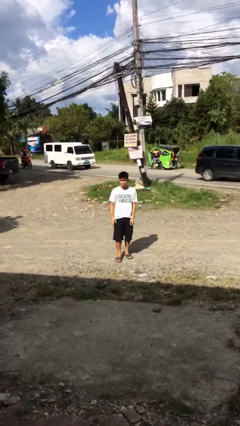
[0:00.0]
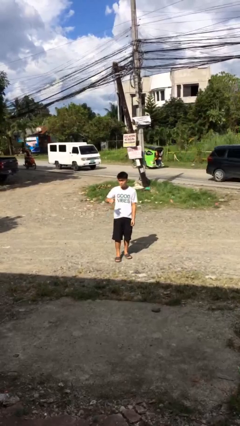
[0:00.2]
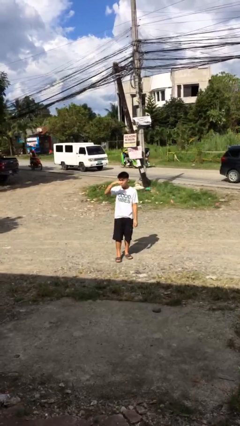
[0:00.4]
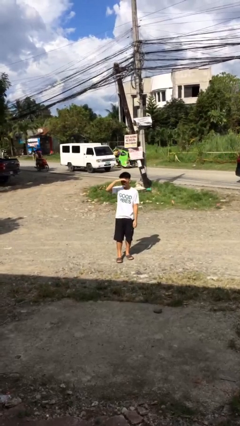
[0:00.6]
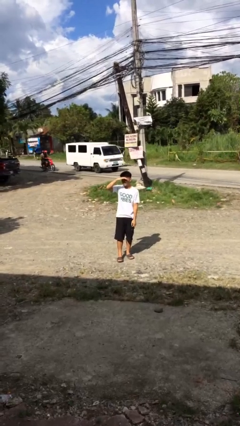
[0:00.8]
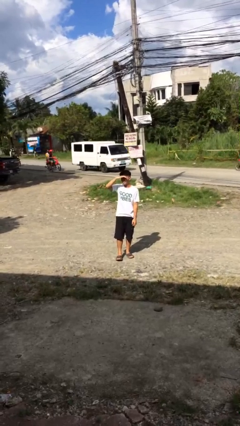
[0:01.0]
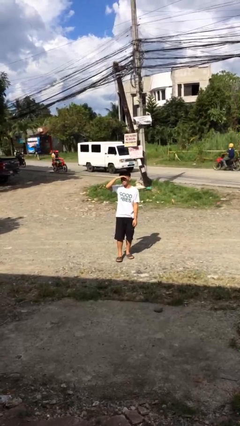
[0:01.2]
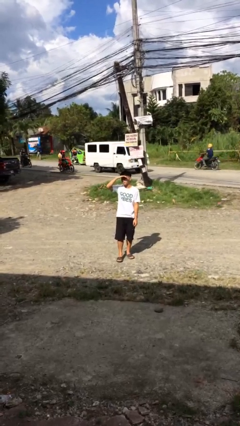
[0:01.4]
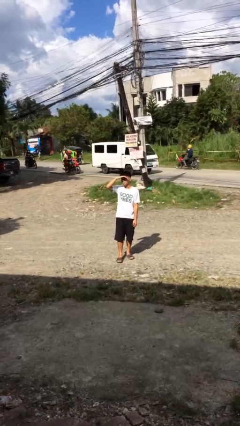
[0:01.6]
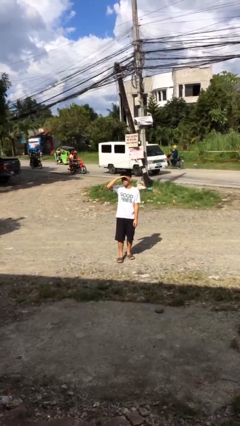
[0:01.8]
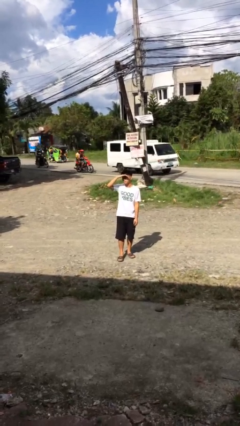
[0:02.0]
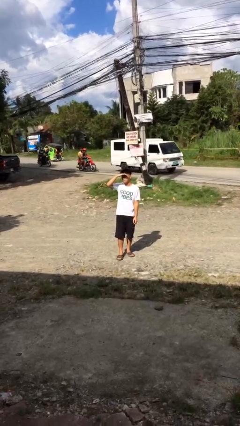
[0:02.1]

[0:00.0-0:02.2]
person shades eyes

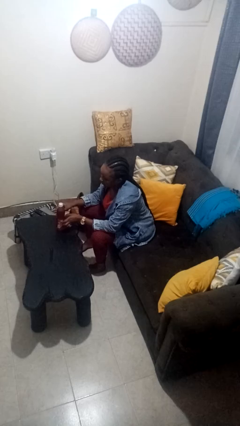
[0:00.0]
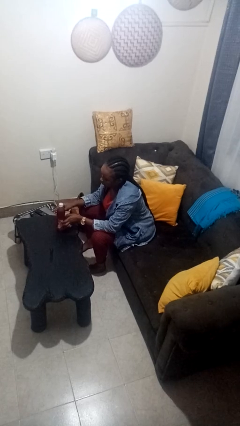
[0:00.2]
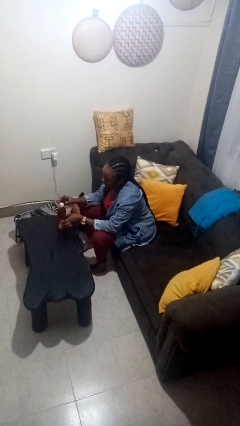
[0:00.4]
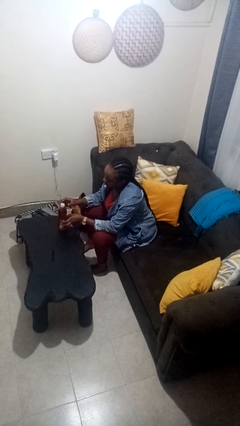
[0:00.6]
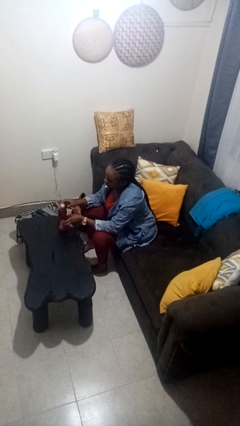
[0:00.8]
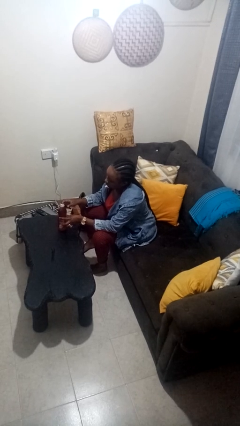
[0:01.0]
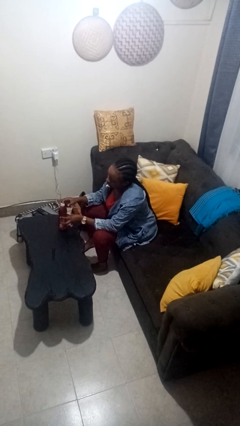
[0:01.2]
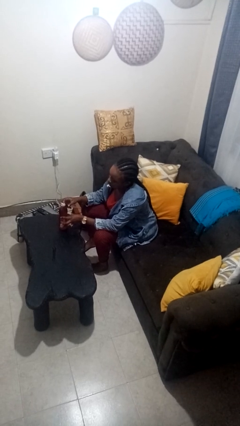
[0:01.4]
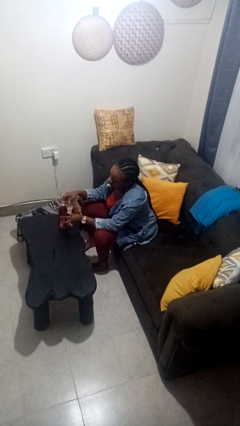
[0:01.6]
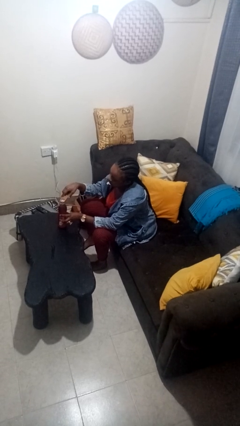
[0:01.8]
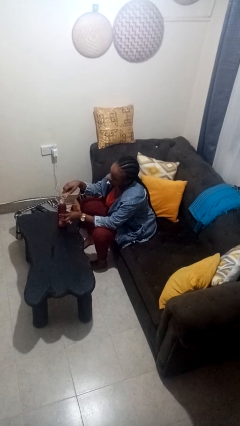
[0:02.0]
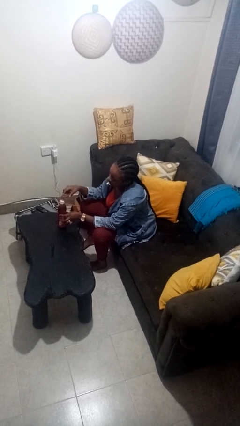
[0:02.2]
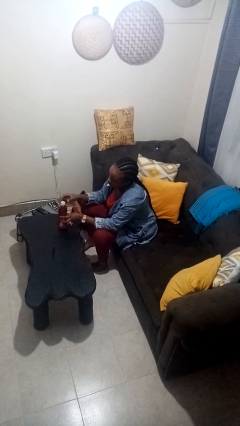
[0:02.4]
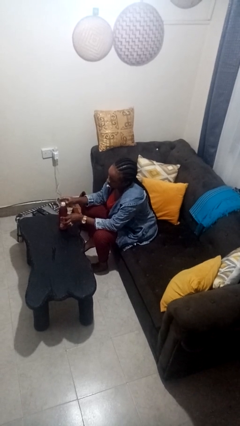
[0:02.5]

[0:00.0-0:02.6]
person opens can with can opener

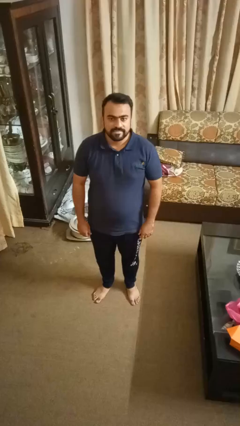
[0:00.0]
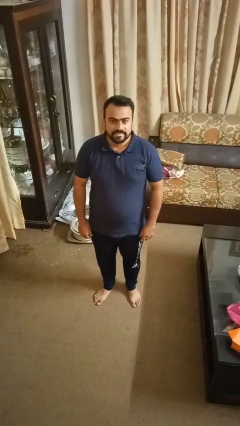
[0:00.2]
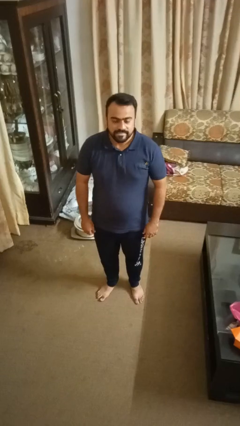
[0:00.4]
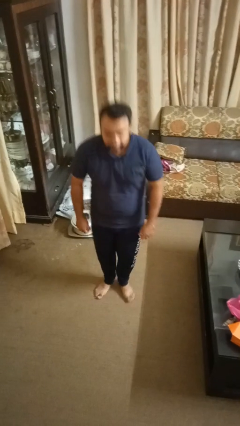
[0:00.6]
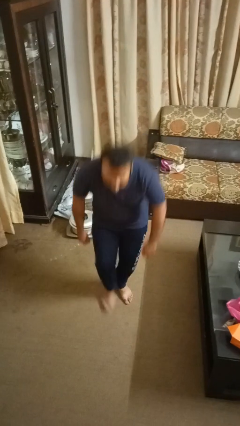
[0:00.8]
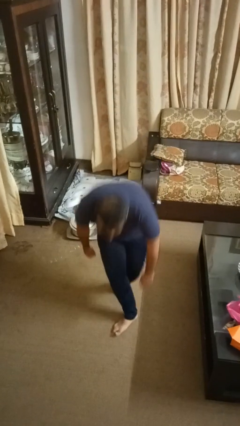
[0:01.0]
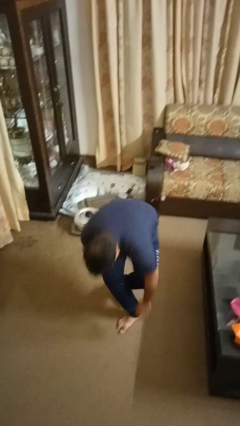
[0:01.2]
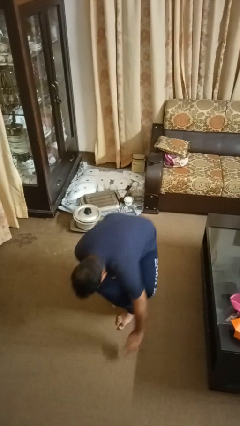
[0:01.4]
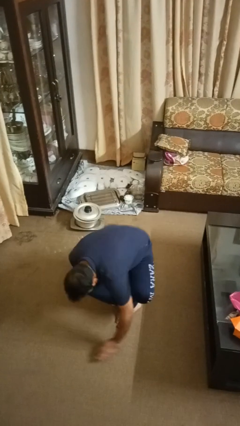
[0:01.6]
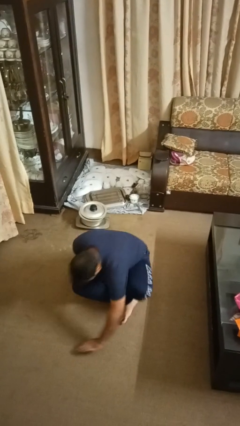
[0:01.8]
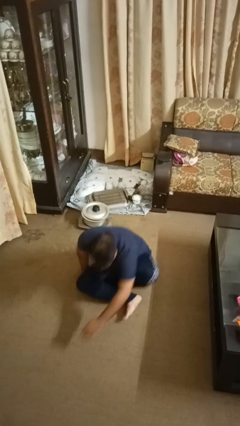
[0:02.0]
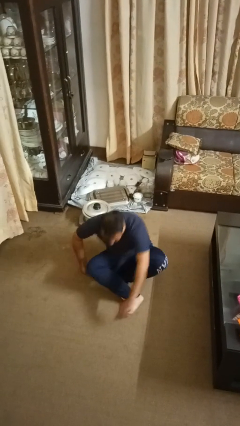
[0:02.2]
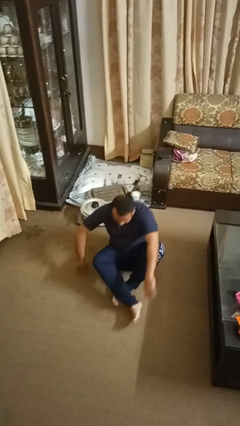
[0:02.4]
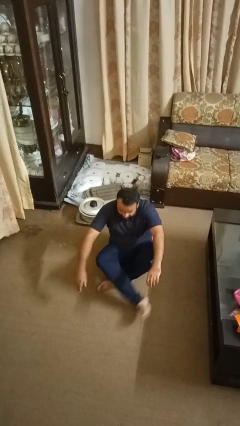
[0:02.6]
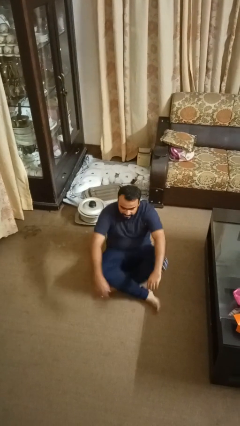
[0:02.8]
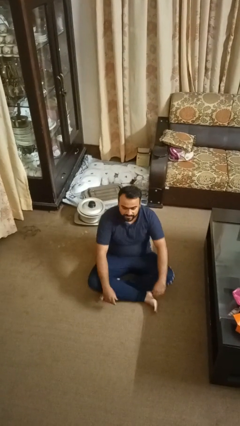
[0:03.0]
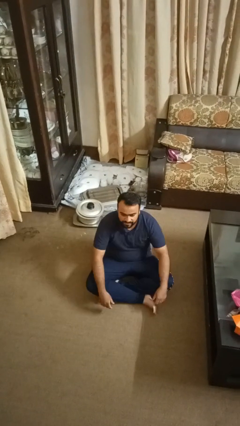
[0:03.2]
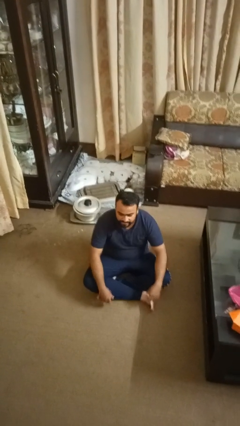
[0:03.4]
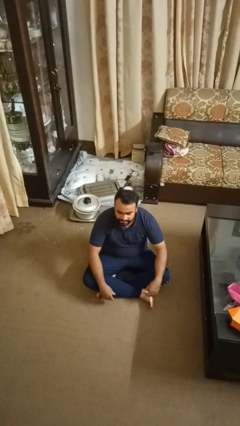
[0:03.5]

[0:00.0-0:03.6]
person sits crisscross

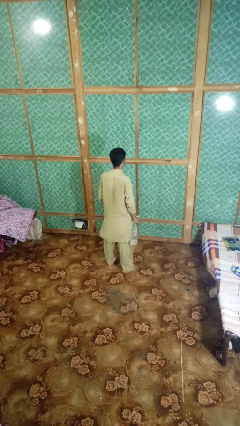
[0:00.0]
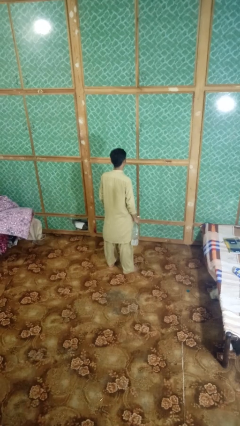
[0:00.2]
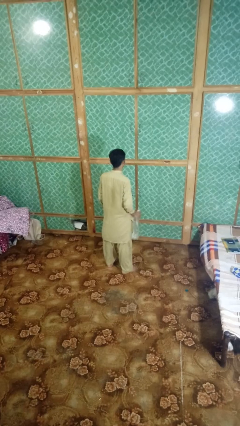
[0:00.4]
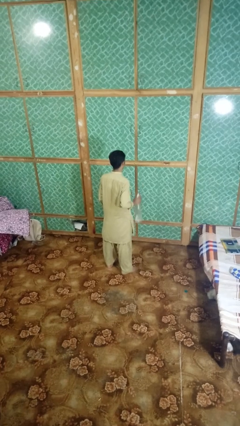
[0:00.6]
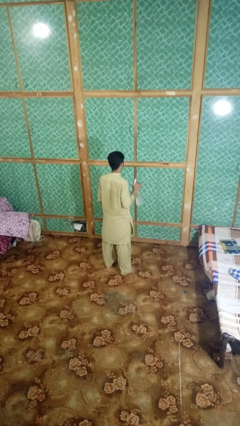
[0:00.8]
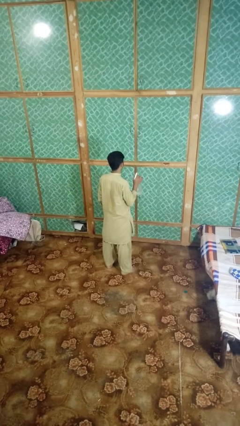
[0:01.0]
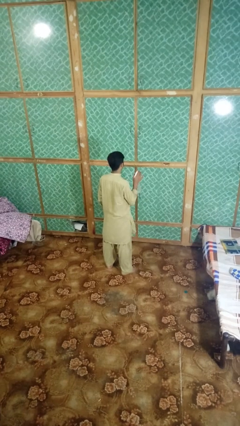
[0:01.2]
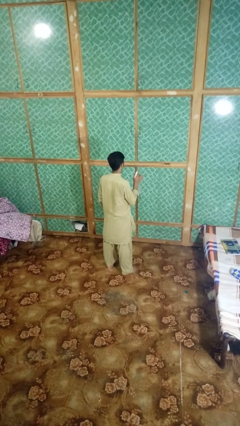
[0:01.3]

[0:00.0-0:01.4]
person sprays from bottle

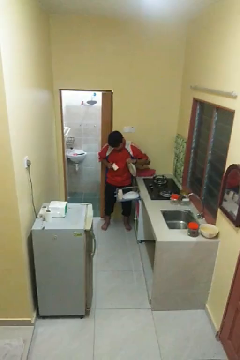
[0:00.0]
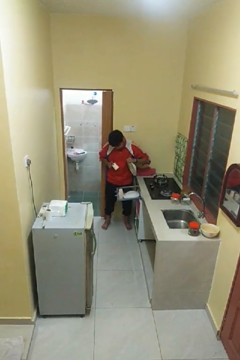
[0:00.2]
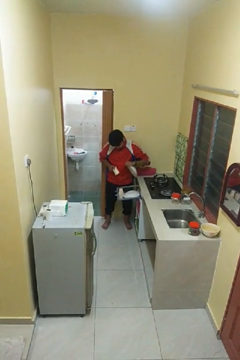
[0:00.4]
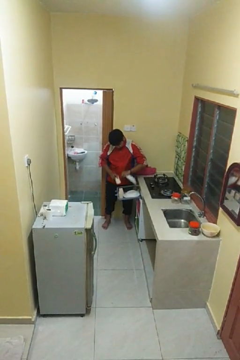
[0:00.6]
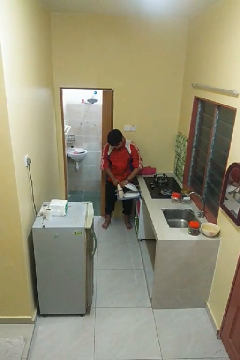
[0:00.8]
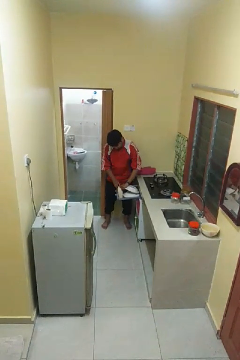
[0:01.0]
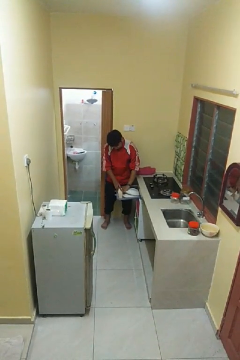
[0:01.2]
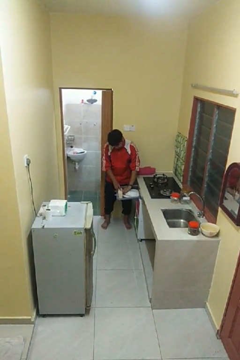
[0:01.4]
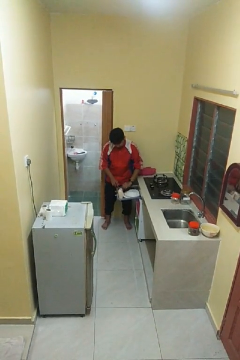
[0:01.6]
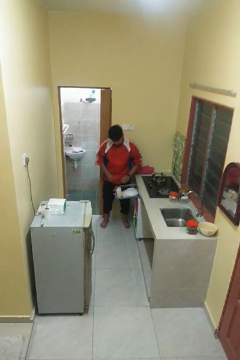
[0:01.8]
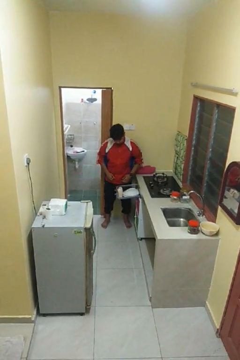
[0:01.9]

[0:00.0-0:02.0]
person puts object into kitchen drawer

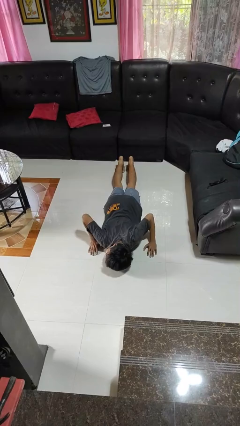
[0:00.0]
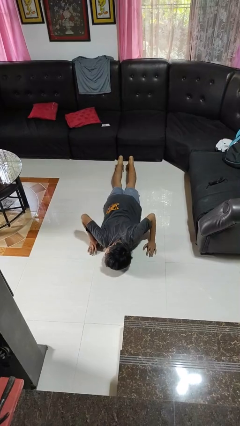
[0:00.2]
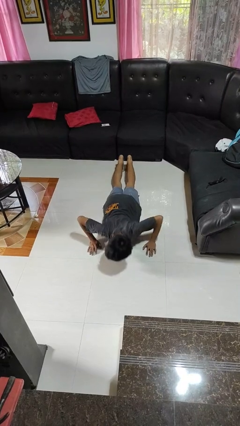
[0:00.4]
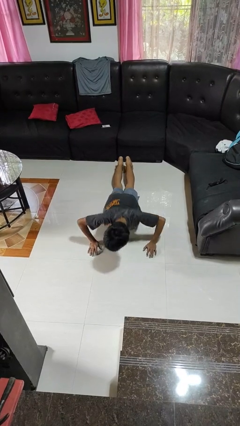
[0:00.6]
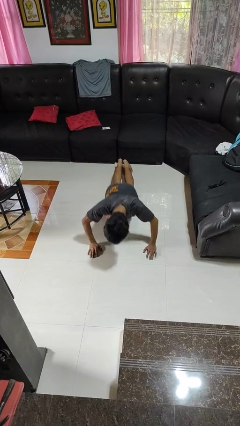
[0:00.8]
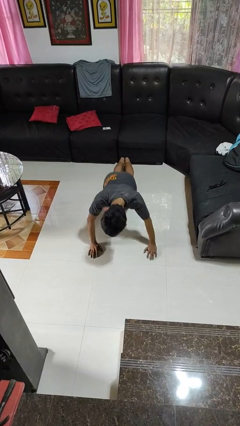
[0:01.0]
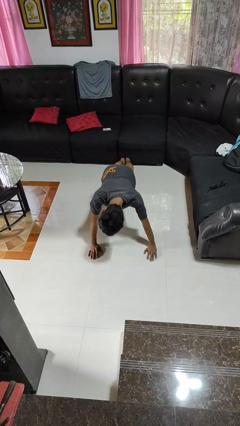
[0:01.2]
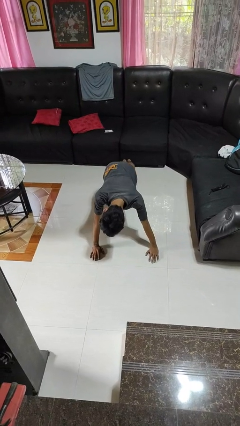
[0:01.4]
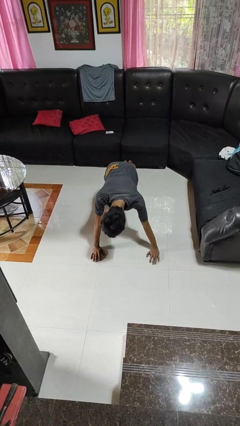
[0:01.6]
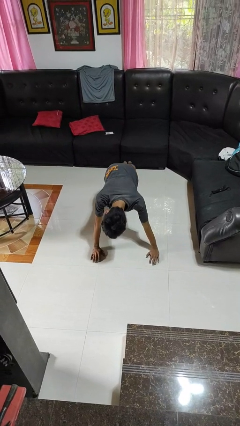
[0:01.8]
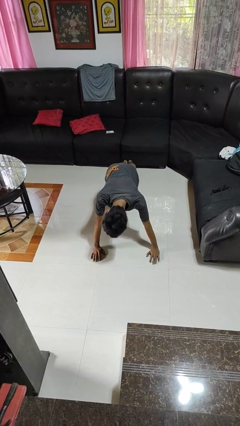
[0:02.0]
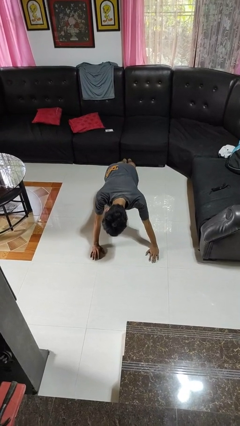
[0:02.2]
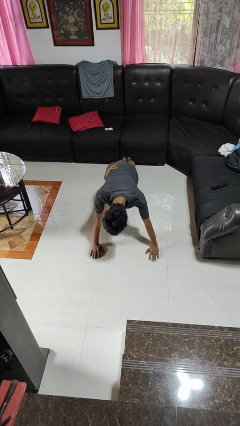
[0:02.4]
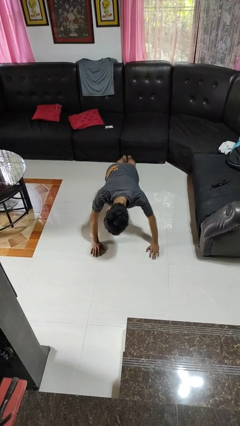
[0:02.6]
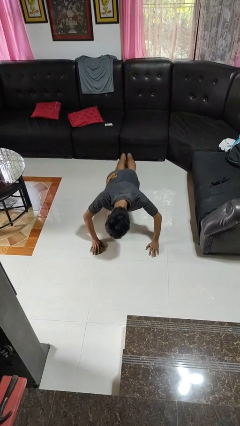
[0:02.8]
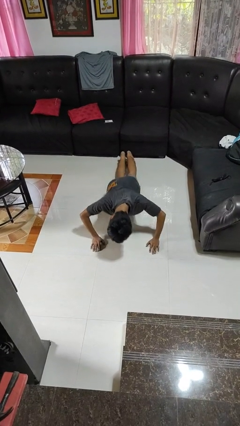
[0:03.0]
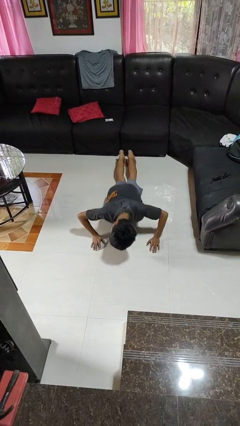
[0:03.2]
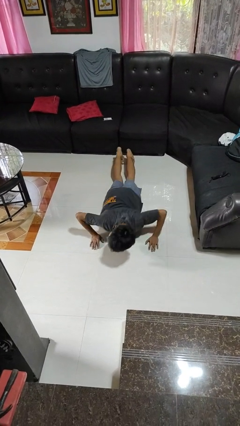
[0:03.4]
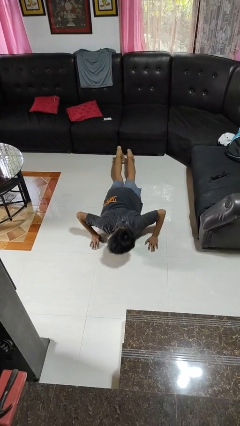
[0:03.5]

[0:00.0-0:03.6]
person exercises with pushup

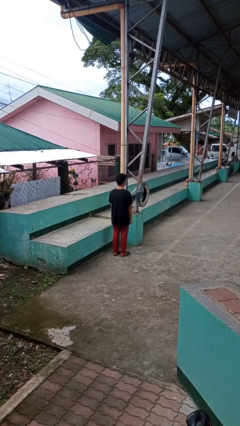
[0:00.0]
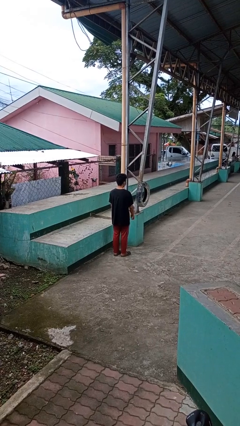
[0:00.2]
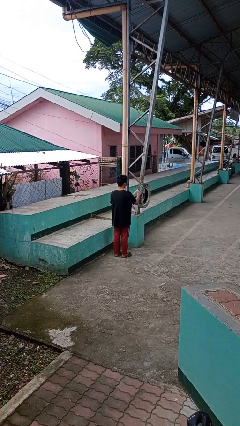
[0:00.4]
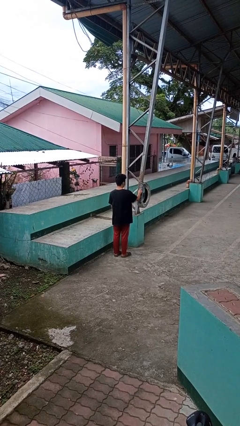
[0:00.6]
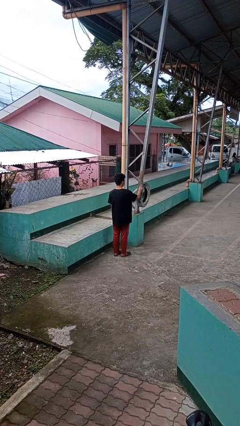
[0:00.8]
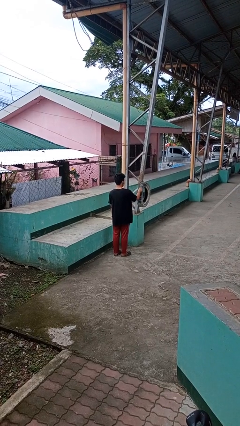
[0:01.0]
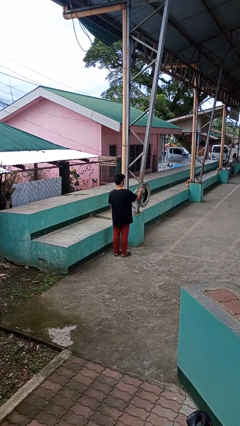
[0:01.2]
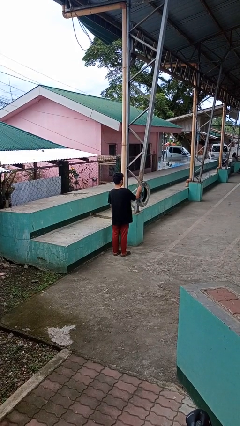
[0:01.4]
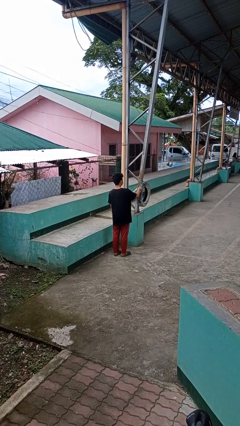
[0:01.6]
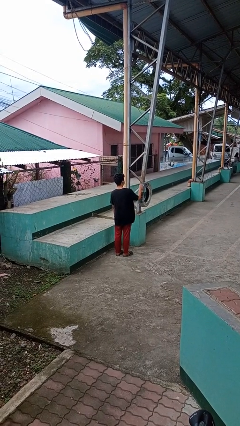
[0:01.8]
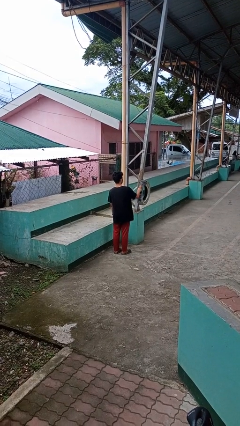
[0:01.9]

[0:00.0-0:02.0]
person taps object with finger
